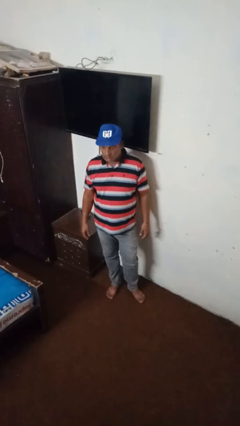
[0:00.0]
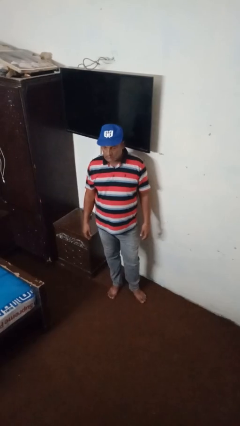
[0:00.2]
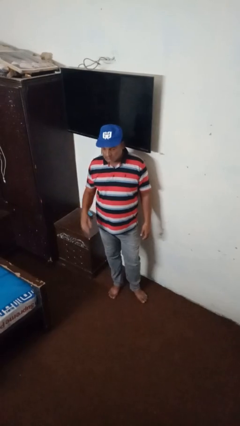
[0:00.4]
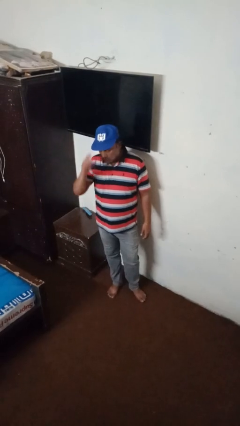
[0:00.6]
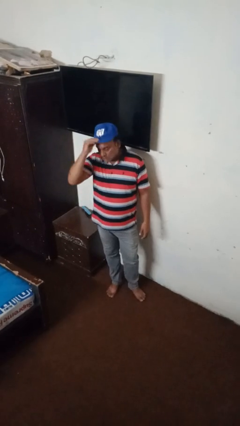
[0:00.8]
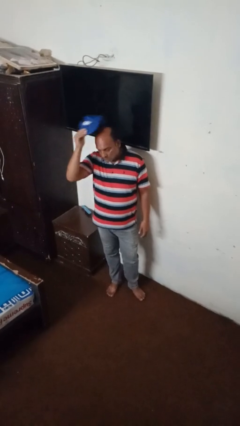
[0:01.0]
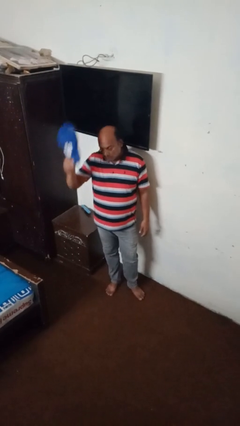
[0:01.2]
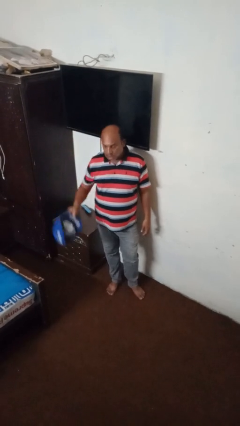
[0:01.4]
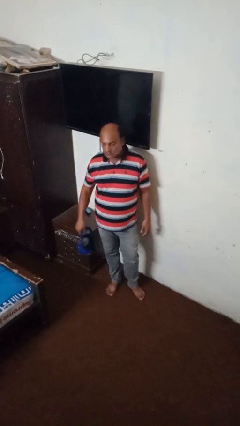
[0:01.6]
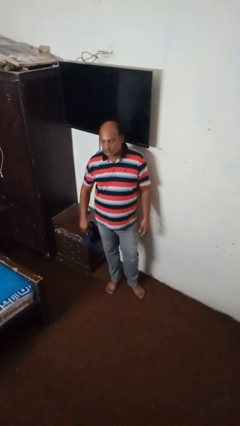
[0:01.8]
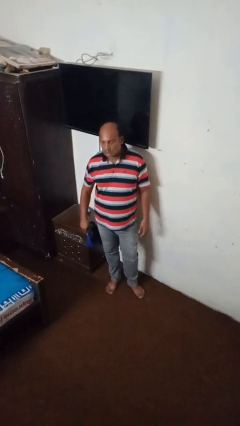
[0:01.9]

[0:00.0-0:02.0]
person takes off hat

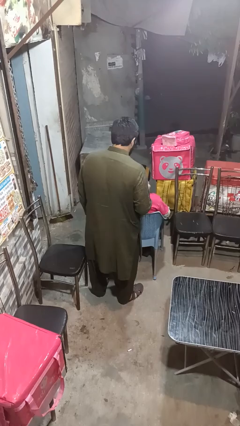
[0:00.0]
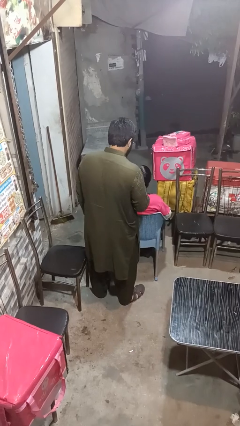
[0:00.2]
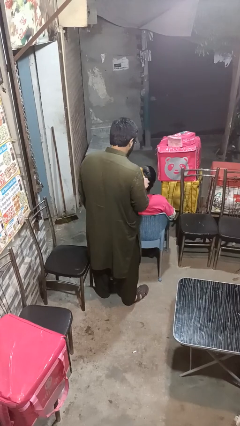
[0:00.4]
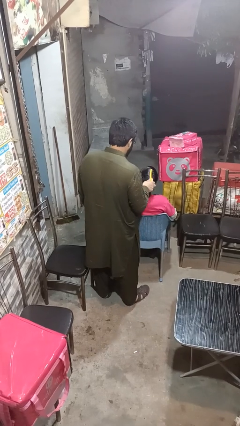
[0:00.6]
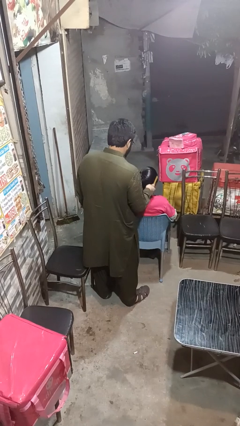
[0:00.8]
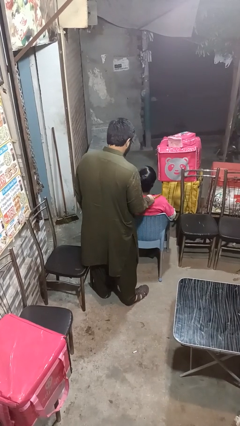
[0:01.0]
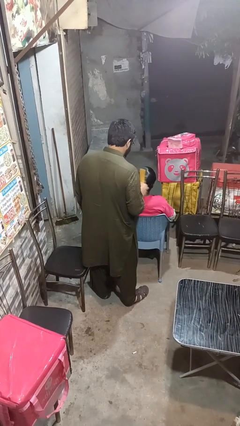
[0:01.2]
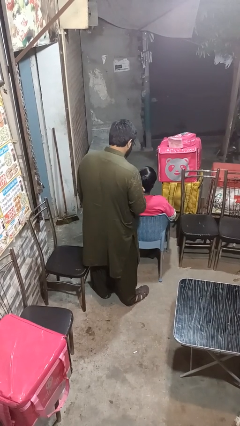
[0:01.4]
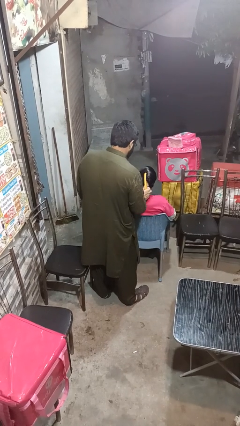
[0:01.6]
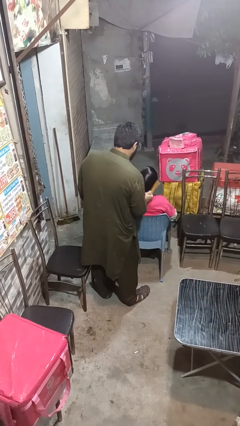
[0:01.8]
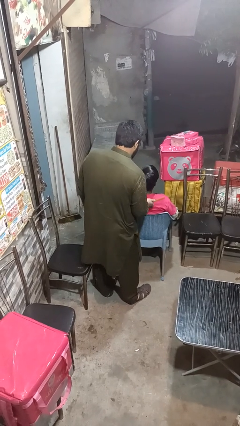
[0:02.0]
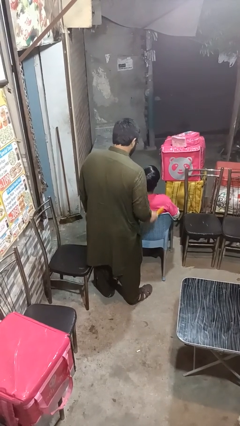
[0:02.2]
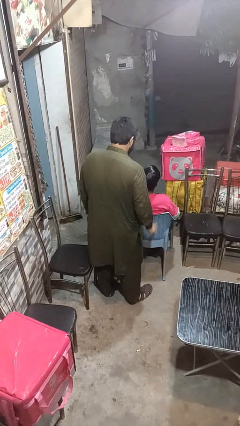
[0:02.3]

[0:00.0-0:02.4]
person brushes hair of person

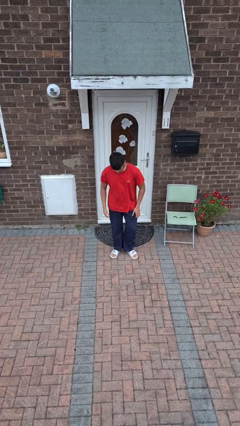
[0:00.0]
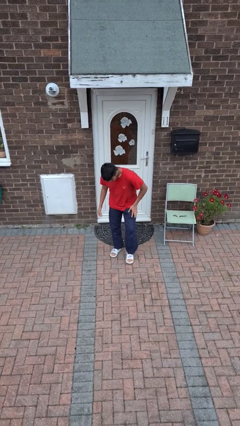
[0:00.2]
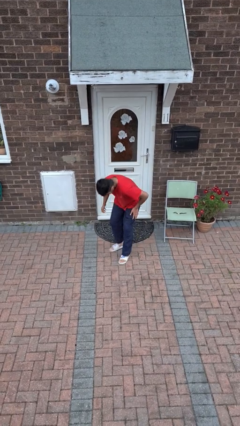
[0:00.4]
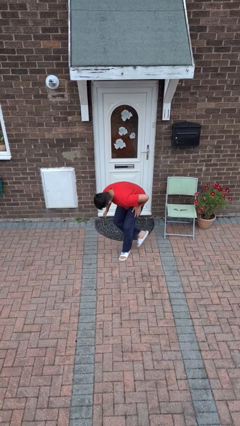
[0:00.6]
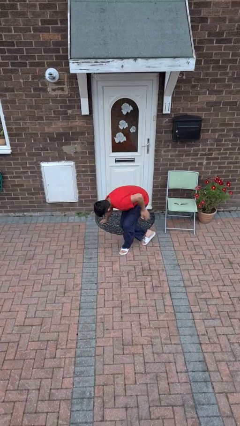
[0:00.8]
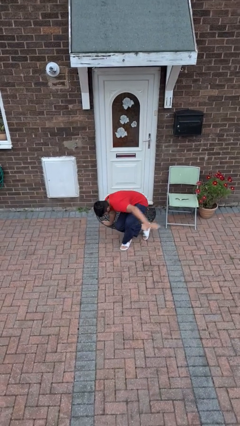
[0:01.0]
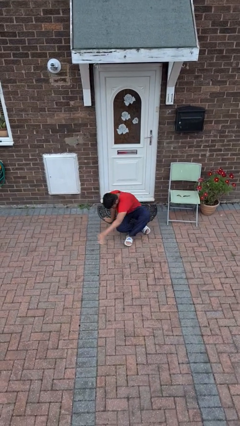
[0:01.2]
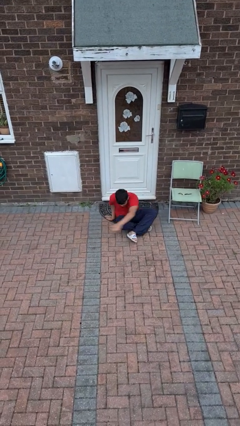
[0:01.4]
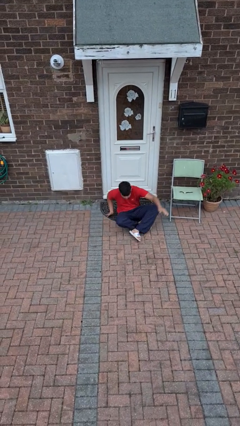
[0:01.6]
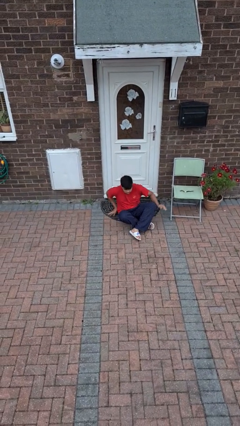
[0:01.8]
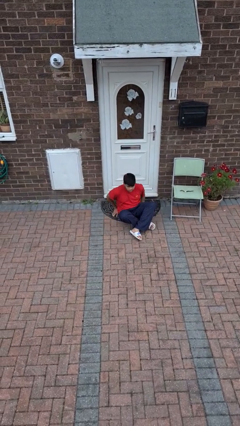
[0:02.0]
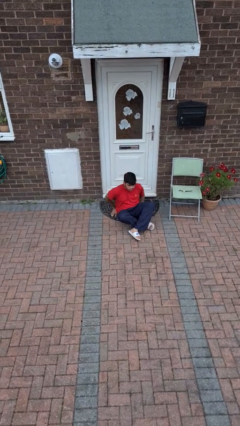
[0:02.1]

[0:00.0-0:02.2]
person sits crisscross

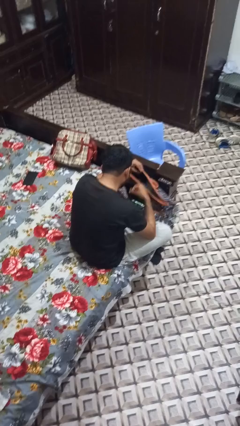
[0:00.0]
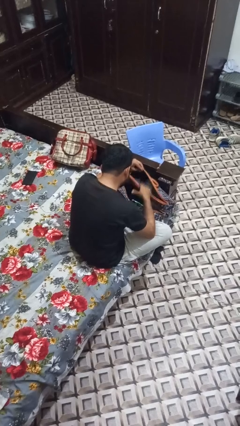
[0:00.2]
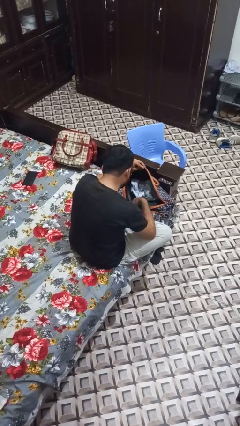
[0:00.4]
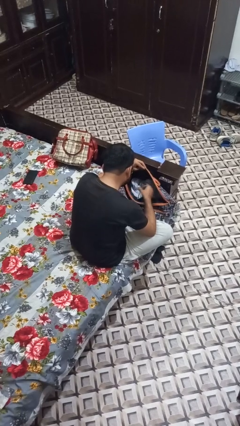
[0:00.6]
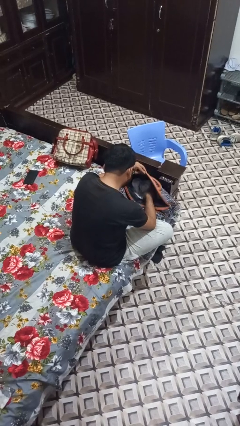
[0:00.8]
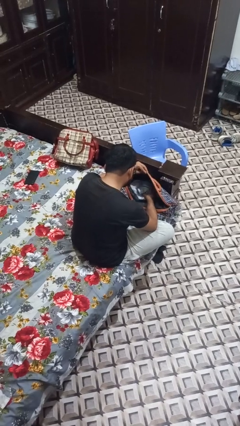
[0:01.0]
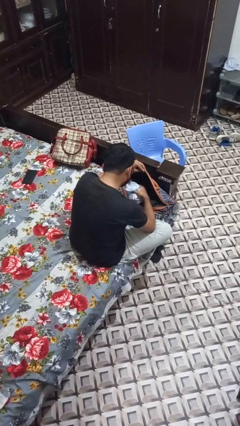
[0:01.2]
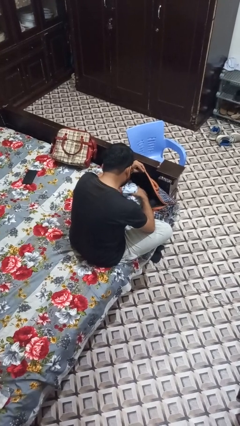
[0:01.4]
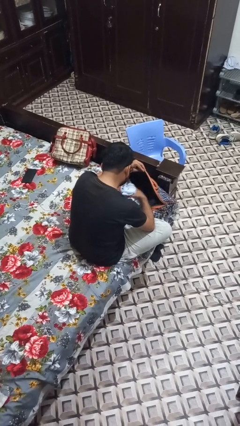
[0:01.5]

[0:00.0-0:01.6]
person searches in backpack

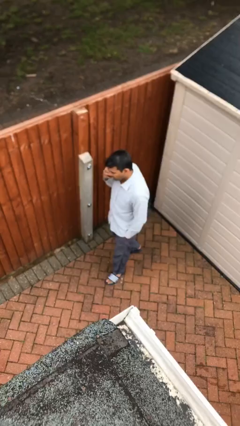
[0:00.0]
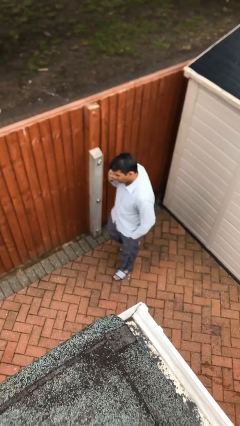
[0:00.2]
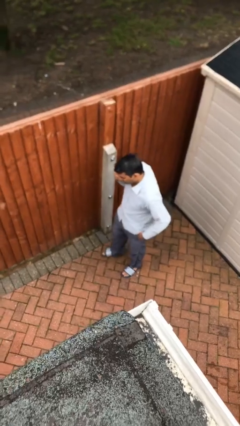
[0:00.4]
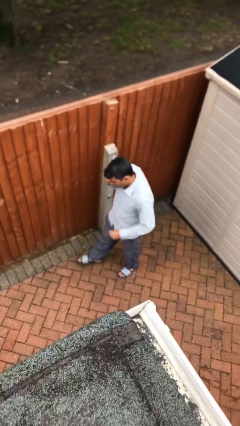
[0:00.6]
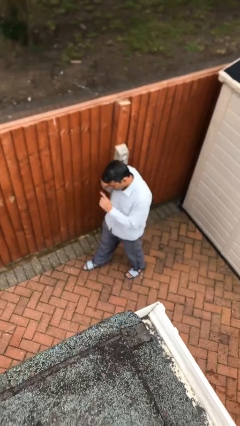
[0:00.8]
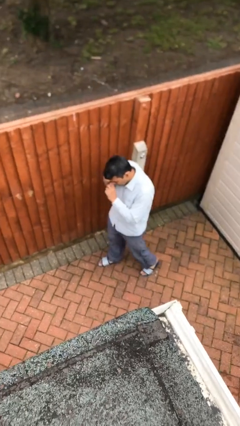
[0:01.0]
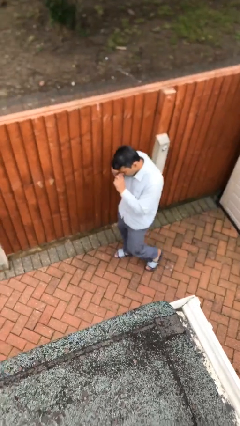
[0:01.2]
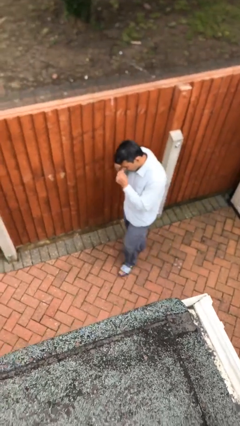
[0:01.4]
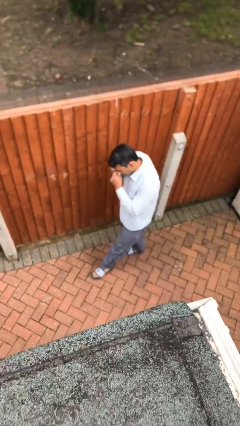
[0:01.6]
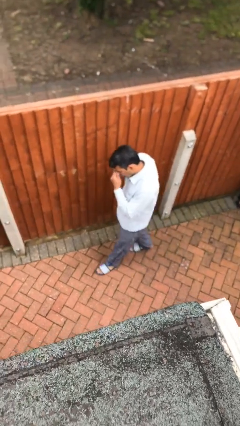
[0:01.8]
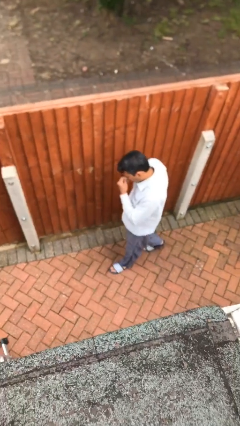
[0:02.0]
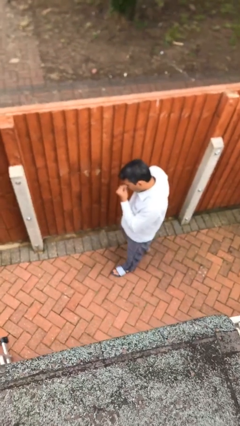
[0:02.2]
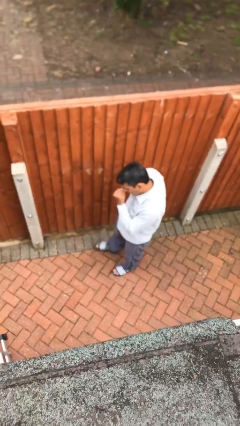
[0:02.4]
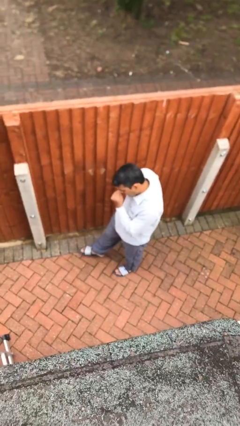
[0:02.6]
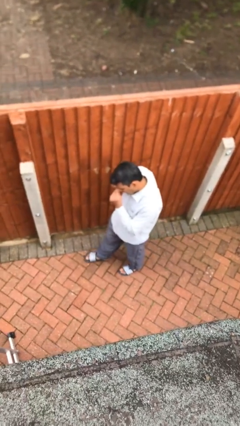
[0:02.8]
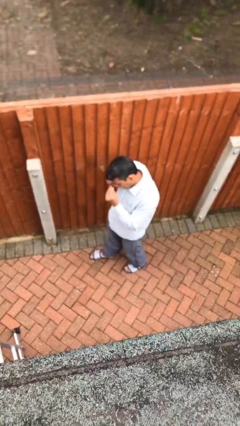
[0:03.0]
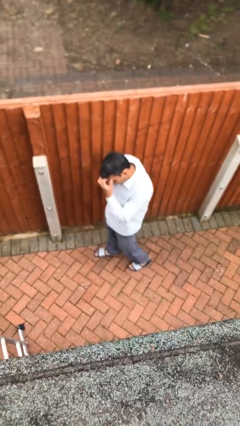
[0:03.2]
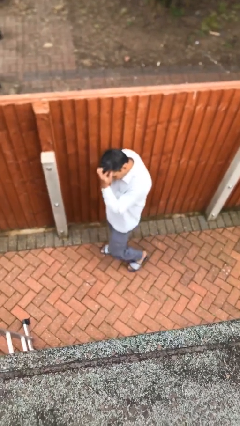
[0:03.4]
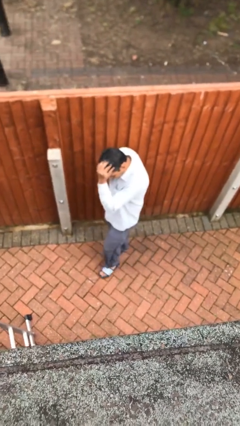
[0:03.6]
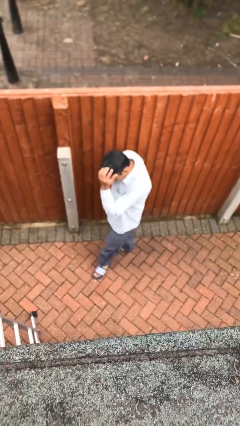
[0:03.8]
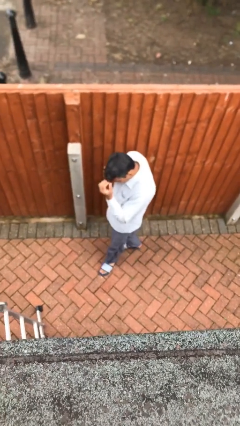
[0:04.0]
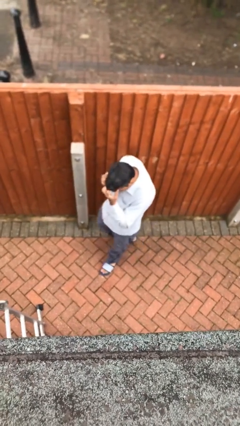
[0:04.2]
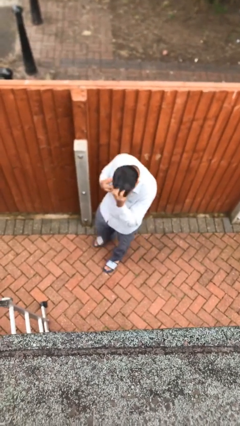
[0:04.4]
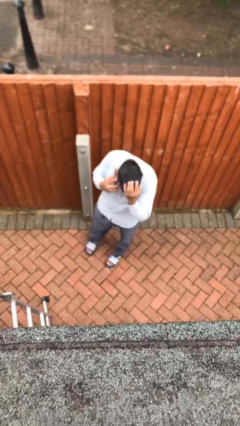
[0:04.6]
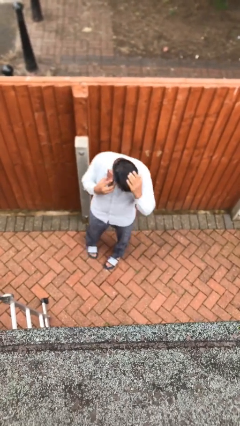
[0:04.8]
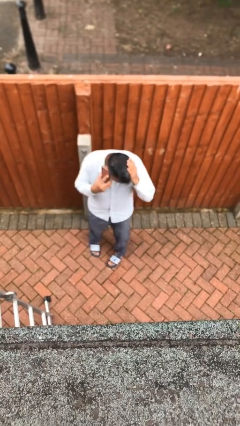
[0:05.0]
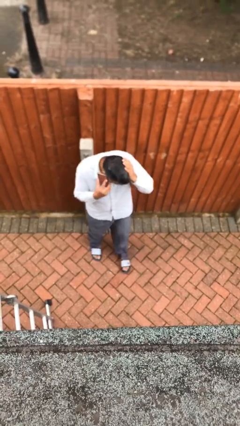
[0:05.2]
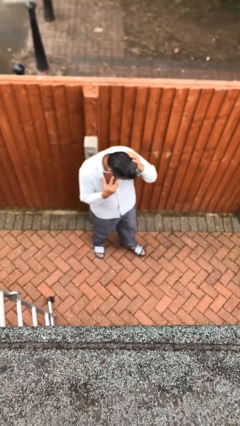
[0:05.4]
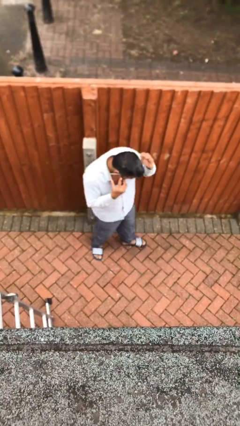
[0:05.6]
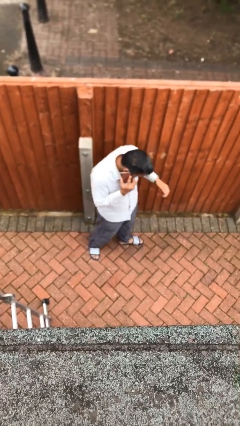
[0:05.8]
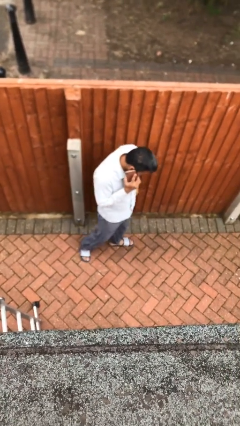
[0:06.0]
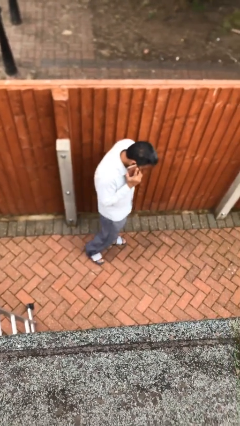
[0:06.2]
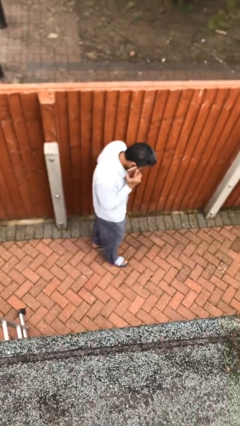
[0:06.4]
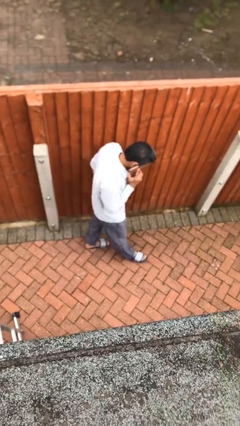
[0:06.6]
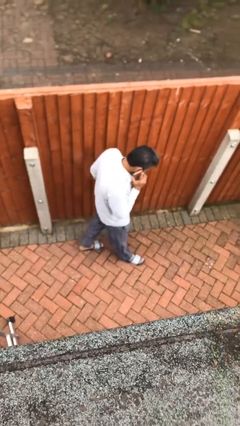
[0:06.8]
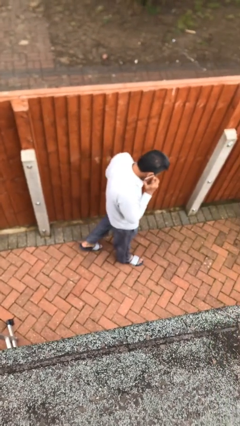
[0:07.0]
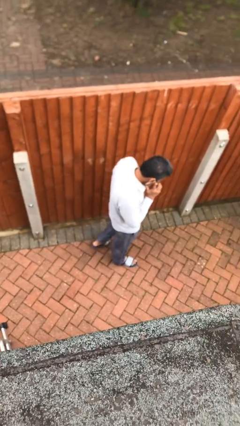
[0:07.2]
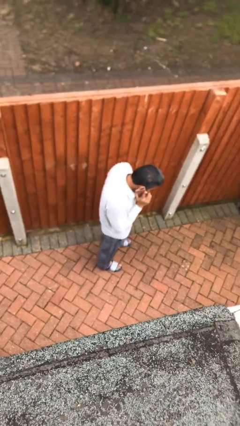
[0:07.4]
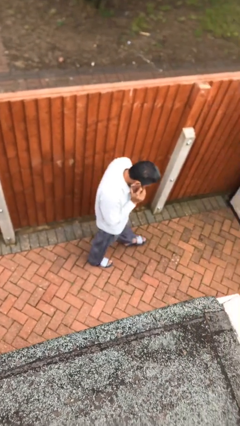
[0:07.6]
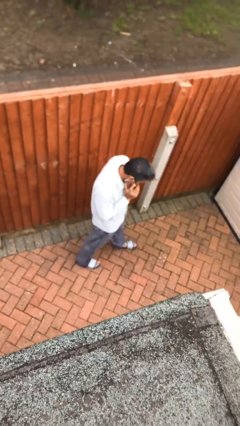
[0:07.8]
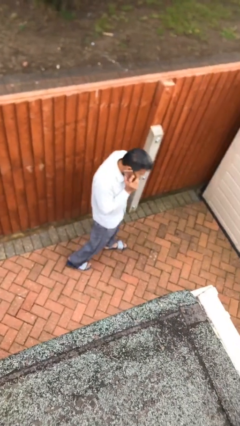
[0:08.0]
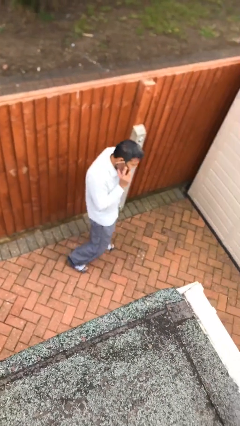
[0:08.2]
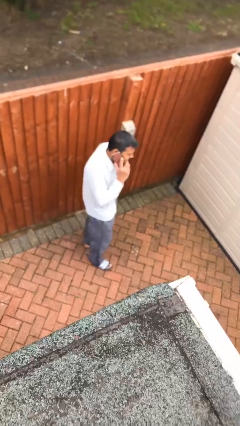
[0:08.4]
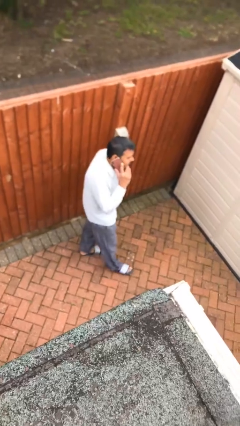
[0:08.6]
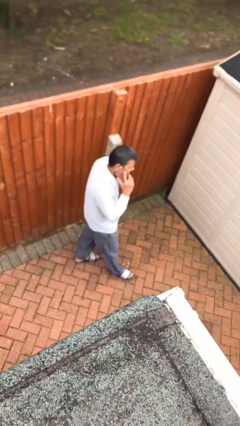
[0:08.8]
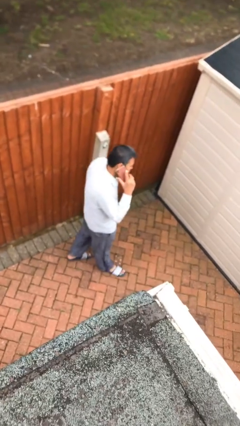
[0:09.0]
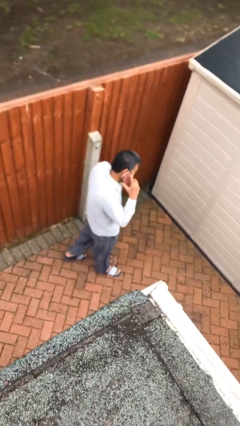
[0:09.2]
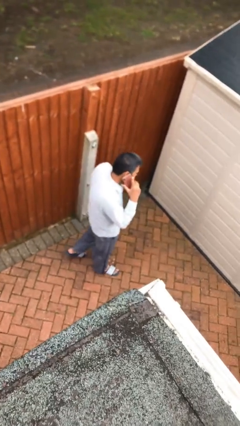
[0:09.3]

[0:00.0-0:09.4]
person talks on phone
